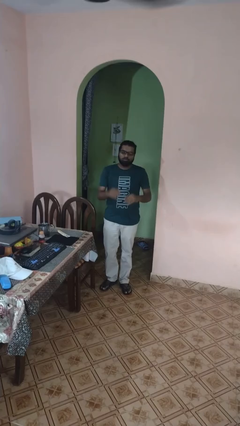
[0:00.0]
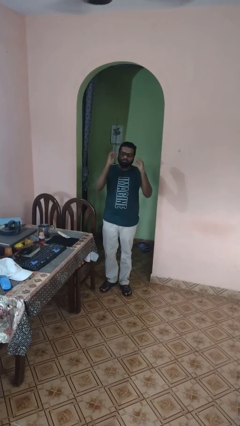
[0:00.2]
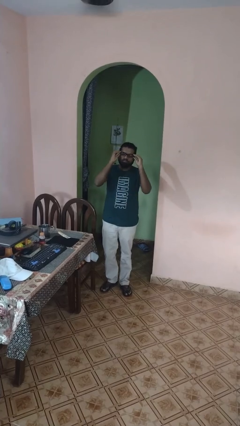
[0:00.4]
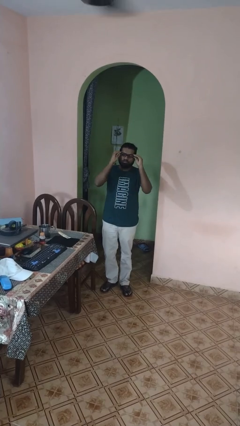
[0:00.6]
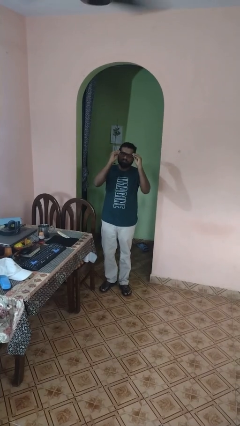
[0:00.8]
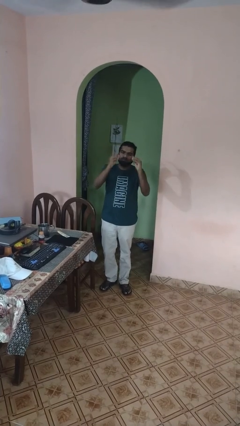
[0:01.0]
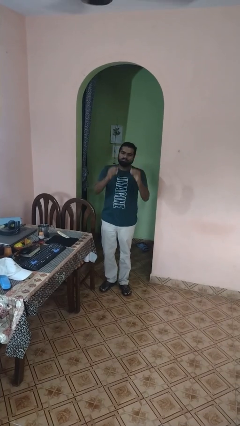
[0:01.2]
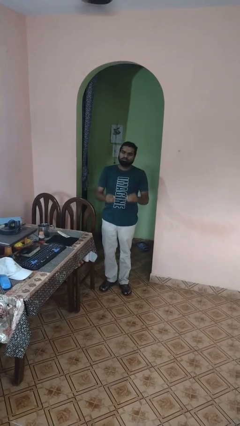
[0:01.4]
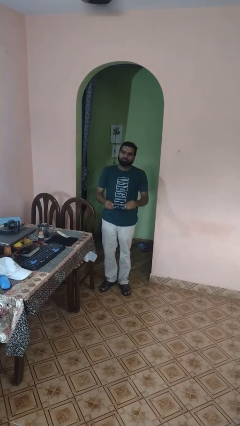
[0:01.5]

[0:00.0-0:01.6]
person takes off glasses

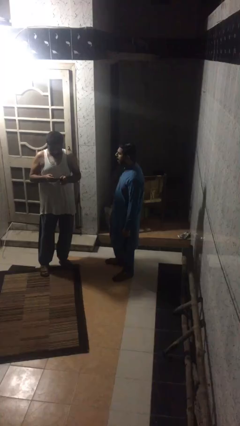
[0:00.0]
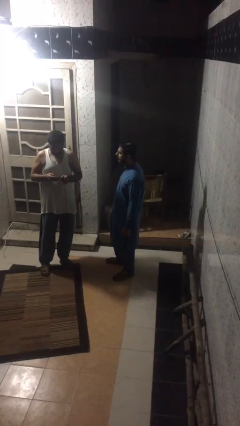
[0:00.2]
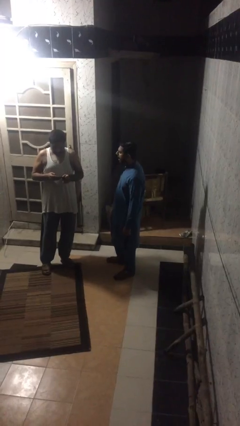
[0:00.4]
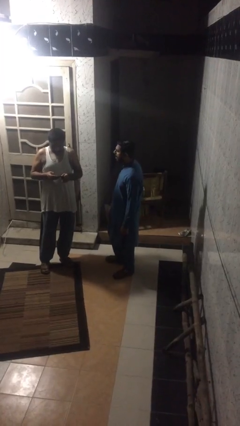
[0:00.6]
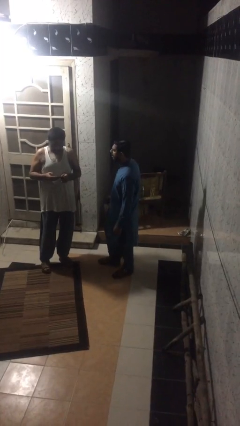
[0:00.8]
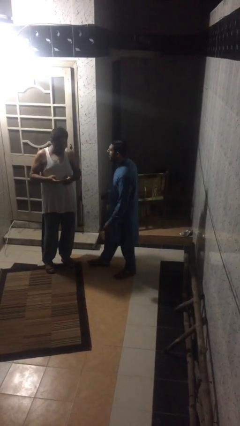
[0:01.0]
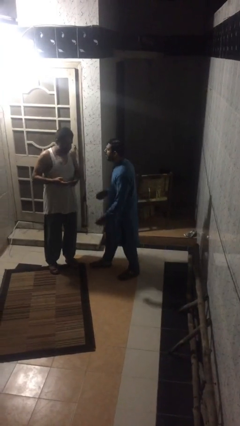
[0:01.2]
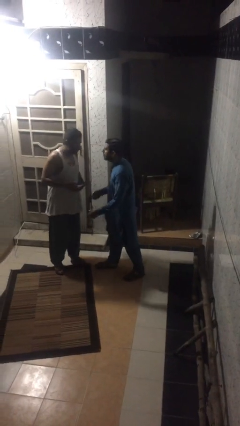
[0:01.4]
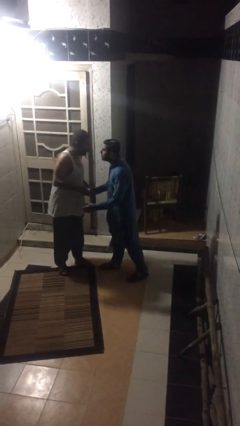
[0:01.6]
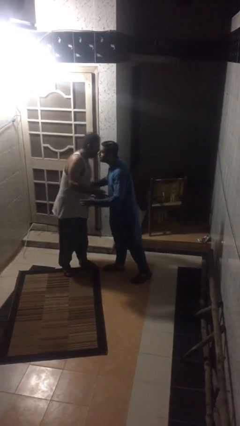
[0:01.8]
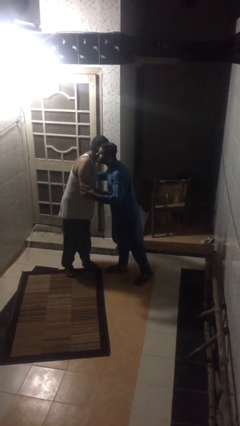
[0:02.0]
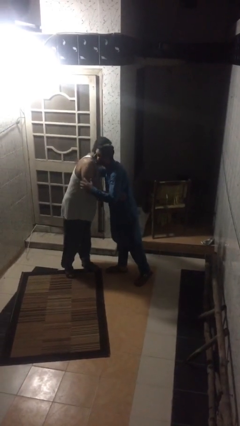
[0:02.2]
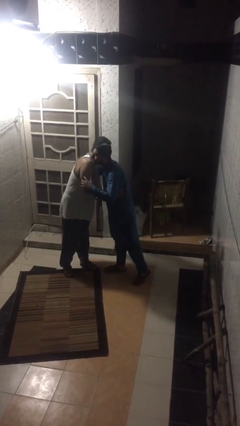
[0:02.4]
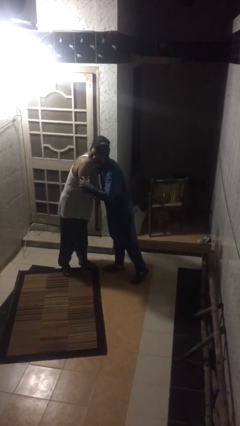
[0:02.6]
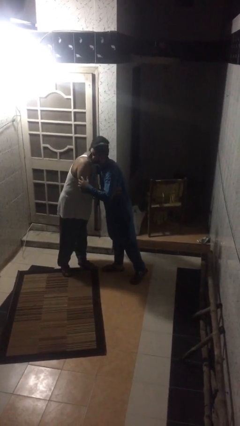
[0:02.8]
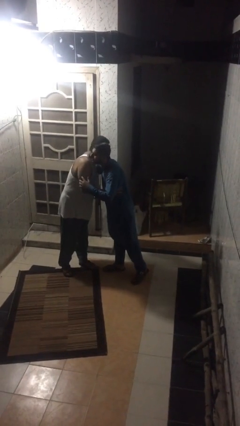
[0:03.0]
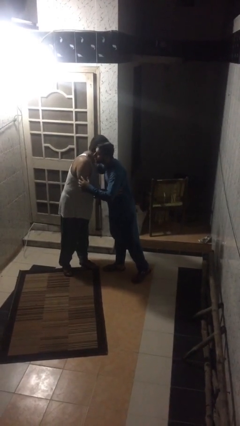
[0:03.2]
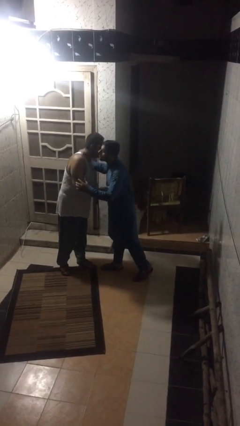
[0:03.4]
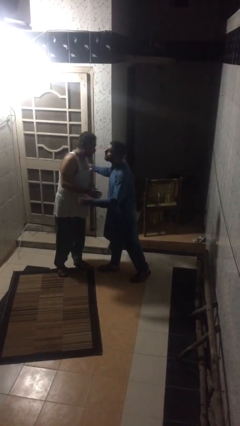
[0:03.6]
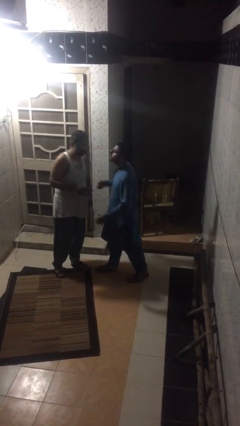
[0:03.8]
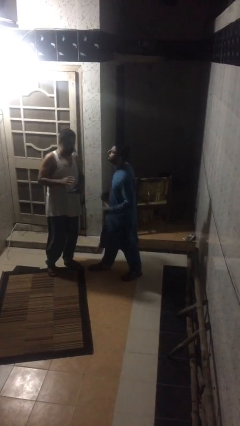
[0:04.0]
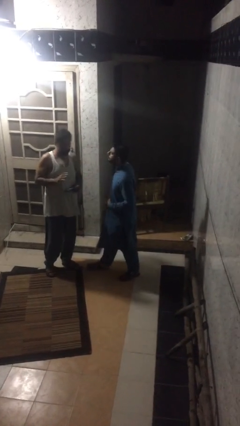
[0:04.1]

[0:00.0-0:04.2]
person embraces person

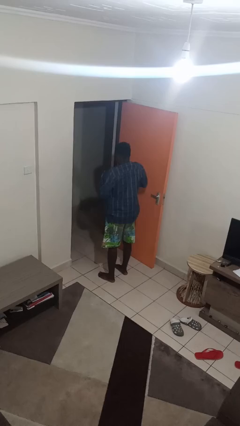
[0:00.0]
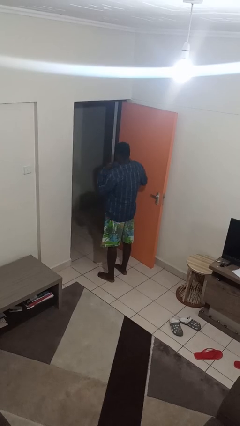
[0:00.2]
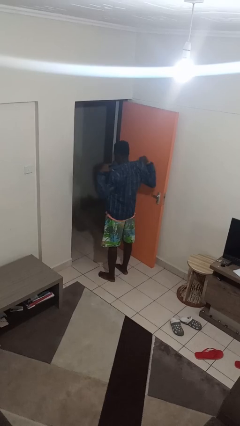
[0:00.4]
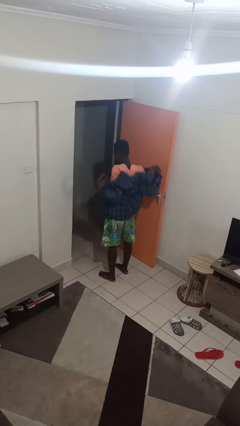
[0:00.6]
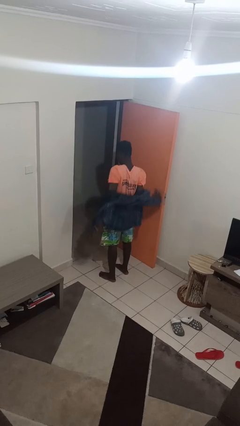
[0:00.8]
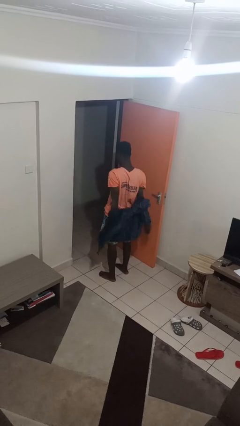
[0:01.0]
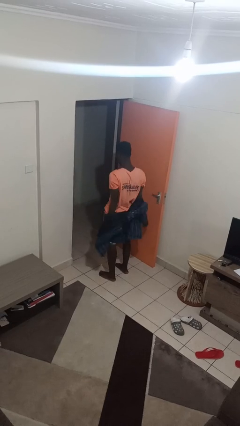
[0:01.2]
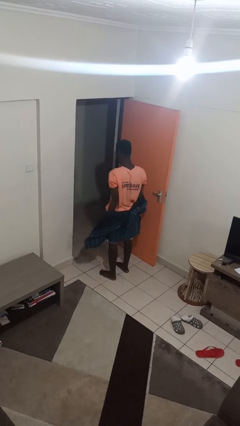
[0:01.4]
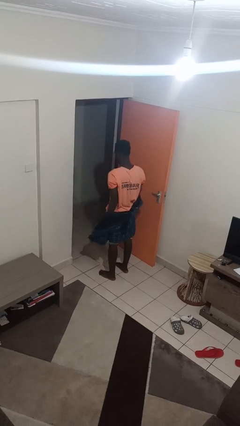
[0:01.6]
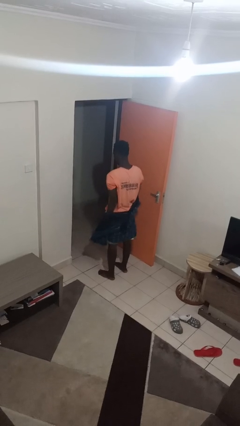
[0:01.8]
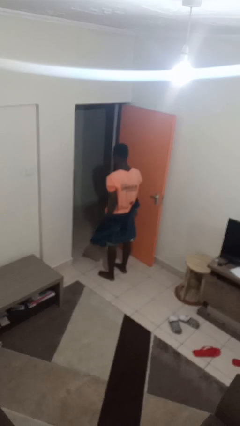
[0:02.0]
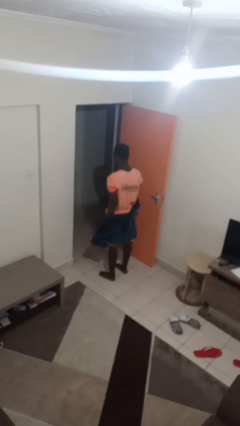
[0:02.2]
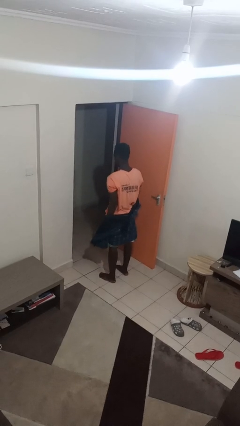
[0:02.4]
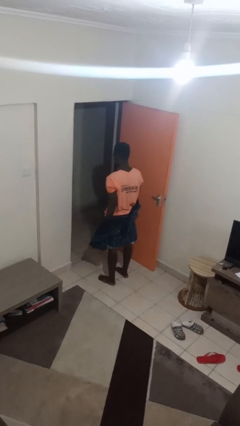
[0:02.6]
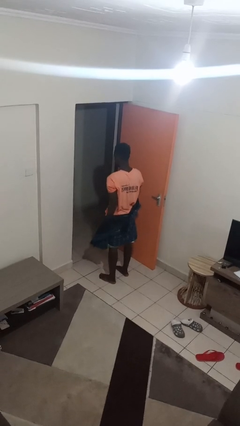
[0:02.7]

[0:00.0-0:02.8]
person takes off jacket

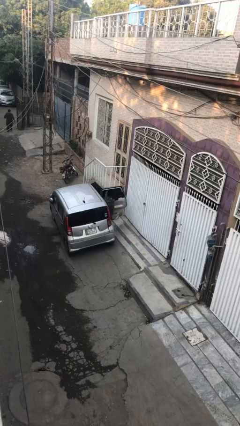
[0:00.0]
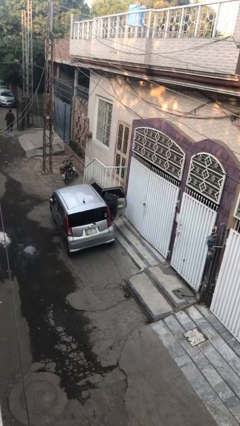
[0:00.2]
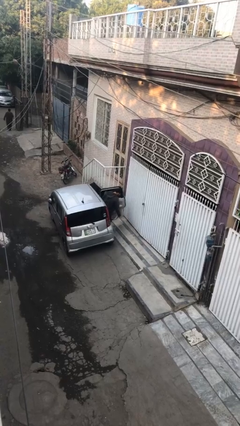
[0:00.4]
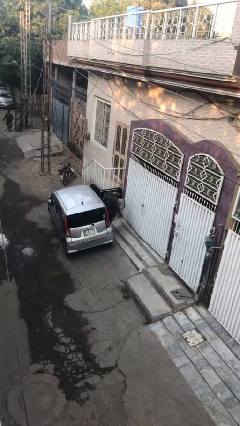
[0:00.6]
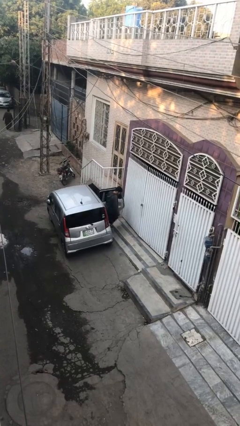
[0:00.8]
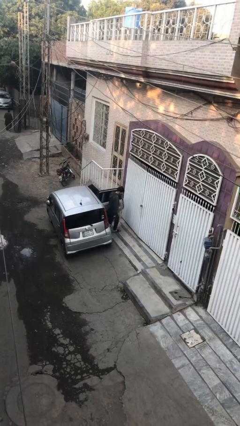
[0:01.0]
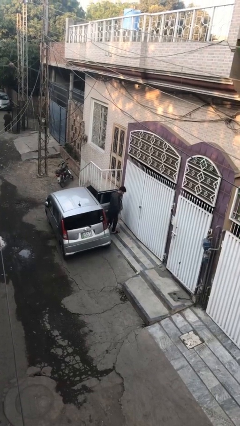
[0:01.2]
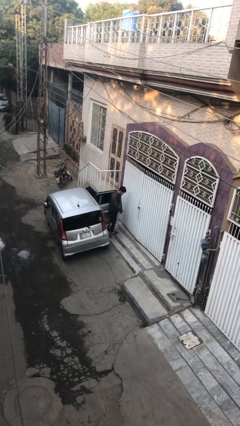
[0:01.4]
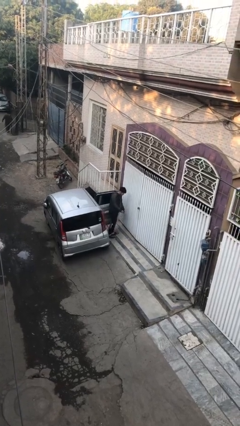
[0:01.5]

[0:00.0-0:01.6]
person exits car

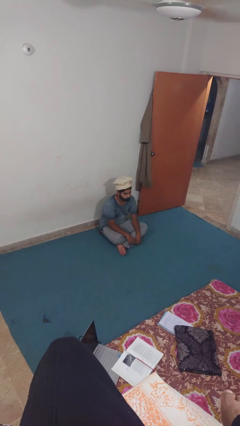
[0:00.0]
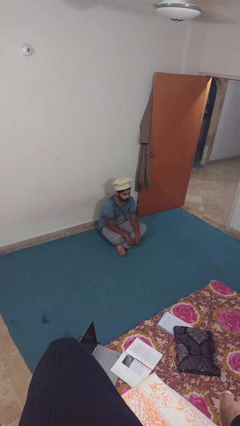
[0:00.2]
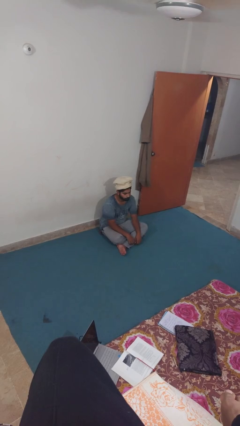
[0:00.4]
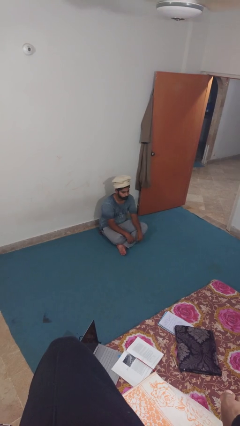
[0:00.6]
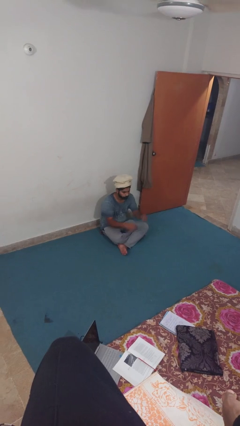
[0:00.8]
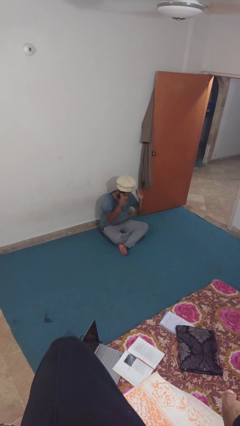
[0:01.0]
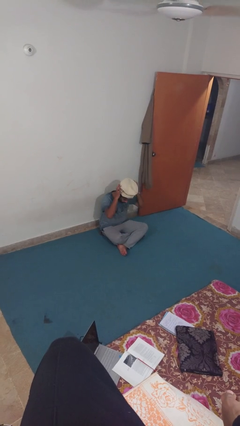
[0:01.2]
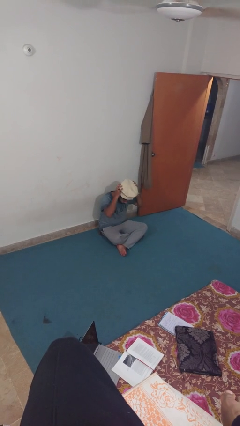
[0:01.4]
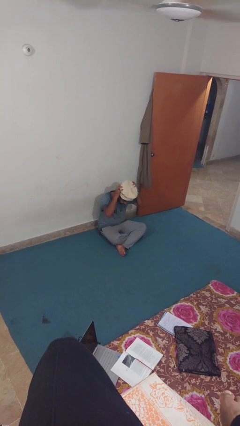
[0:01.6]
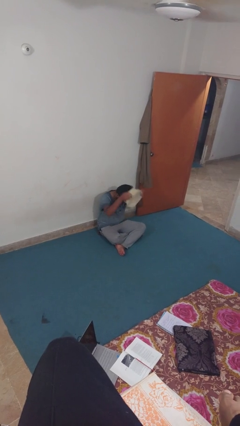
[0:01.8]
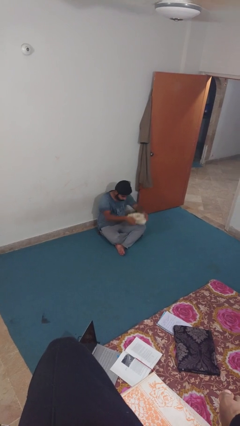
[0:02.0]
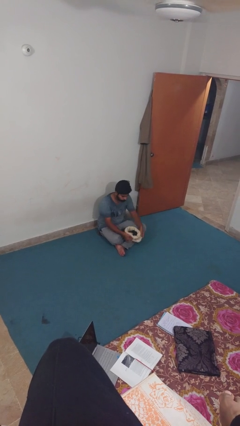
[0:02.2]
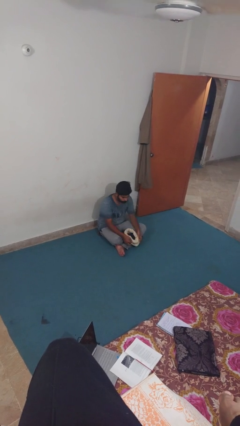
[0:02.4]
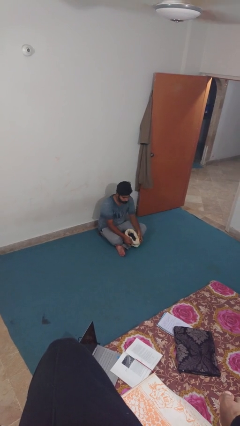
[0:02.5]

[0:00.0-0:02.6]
person takes off hat

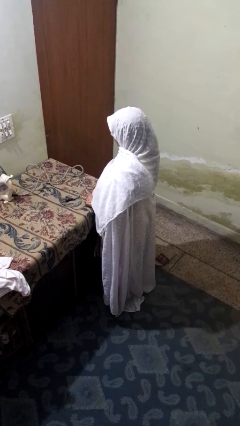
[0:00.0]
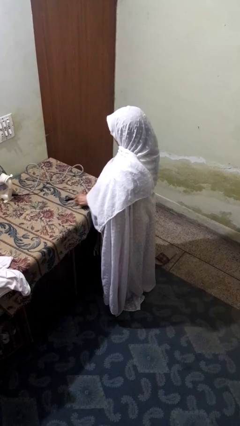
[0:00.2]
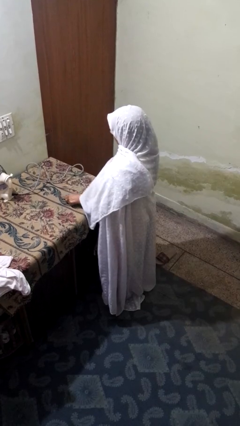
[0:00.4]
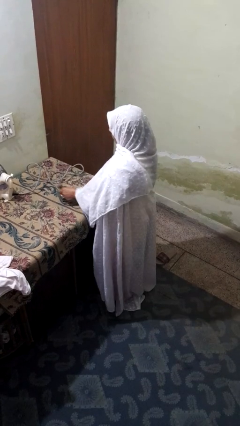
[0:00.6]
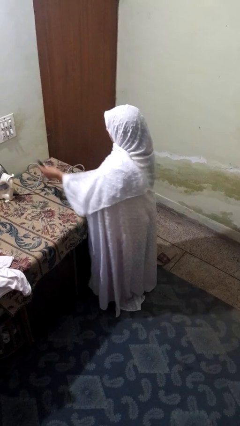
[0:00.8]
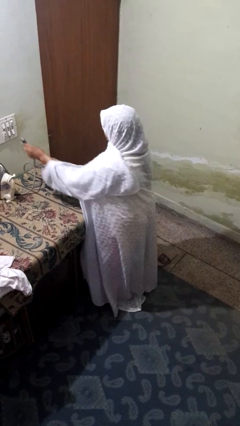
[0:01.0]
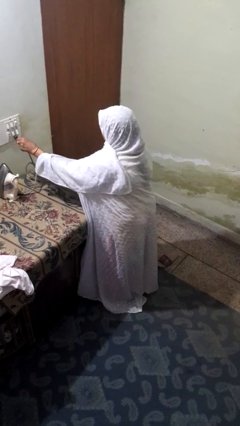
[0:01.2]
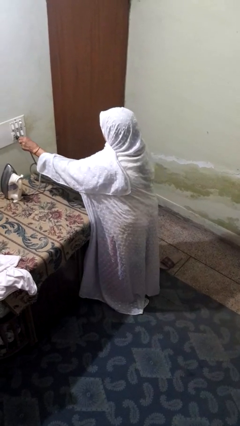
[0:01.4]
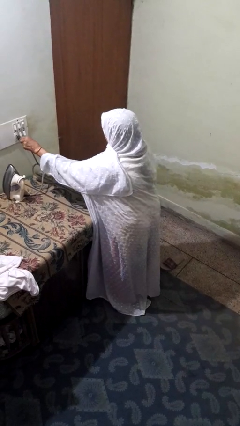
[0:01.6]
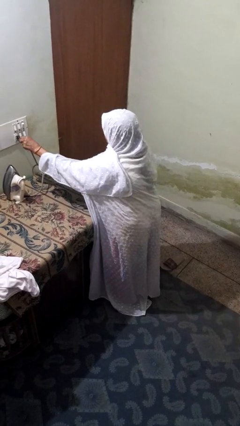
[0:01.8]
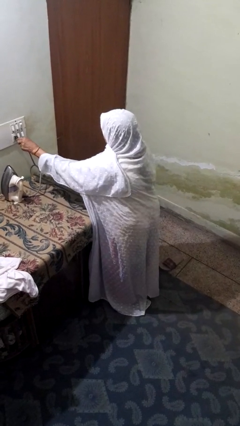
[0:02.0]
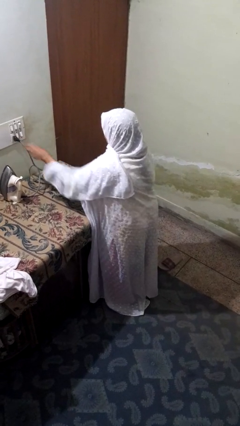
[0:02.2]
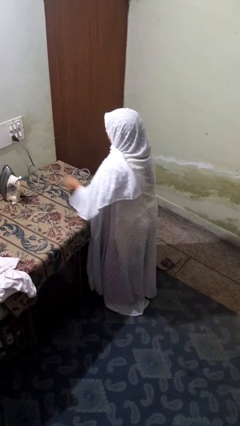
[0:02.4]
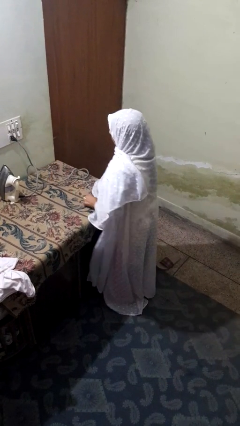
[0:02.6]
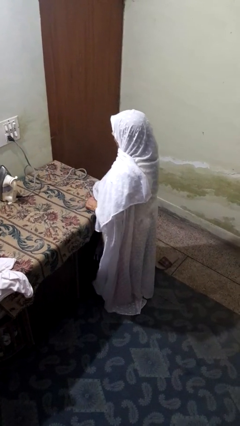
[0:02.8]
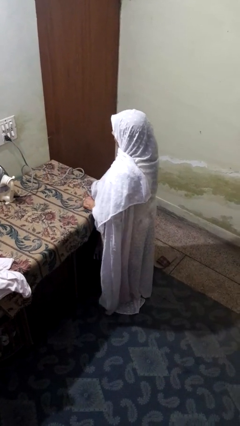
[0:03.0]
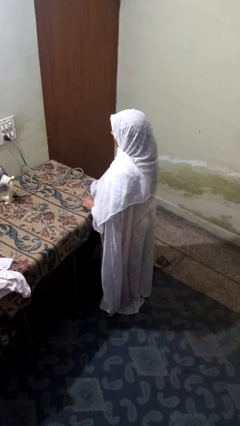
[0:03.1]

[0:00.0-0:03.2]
person plugs into electrical socket

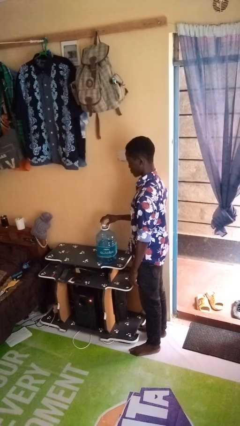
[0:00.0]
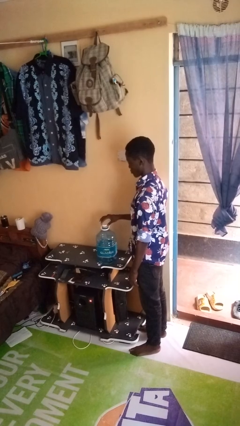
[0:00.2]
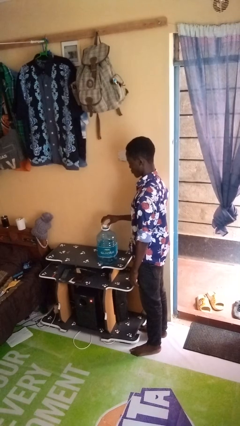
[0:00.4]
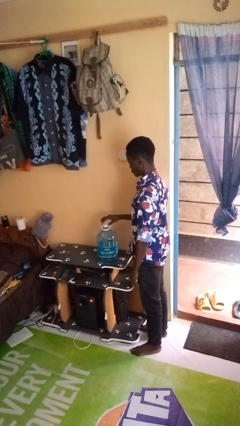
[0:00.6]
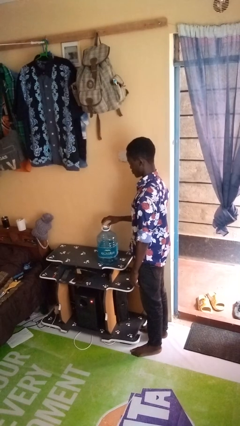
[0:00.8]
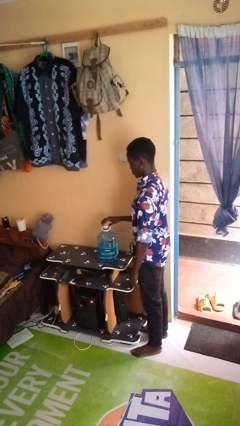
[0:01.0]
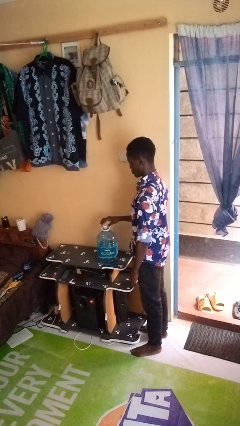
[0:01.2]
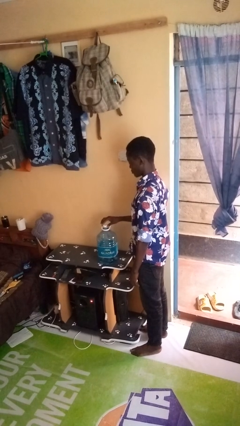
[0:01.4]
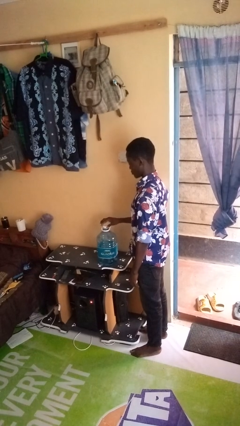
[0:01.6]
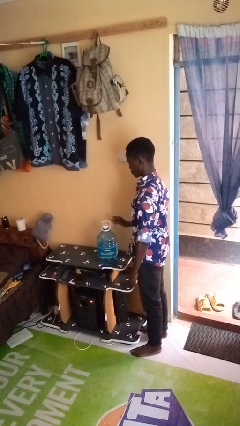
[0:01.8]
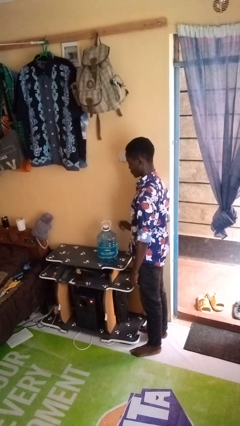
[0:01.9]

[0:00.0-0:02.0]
person screws lid to bottle
